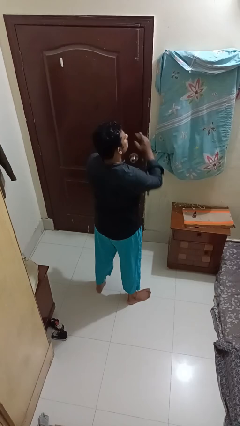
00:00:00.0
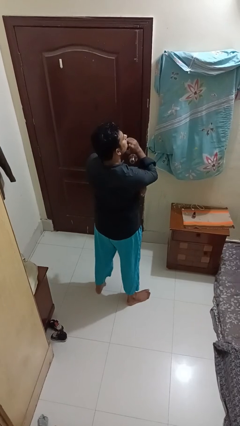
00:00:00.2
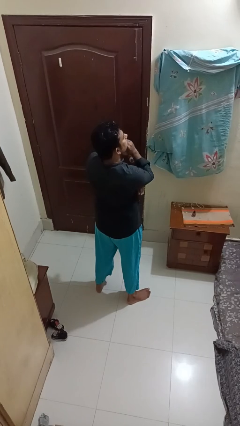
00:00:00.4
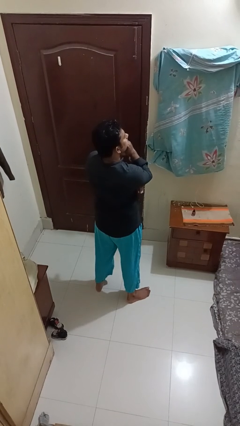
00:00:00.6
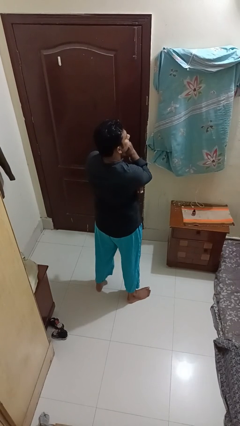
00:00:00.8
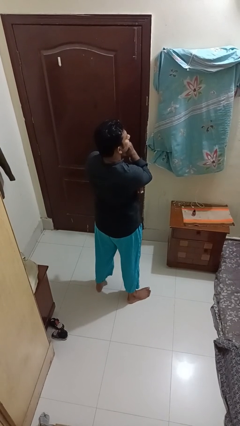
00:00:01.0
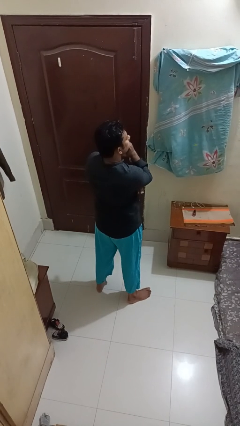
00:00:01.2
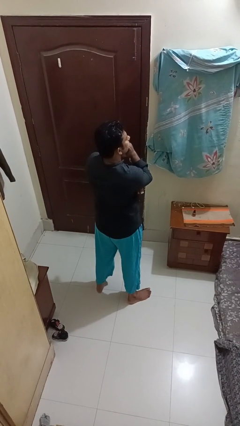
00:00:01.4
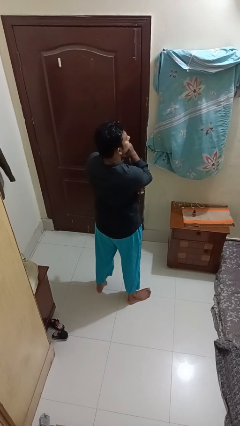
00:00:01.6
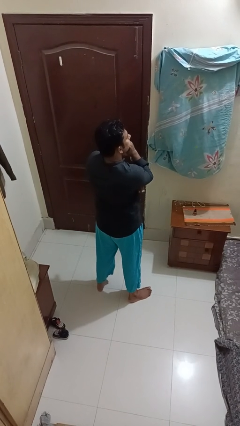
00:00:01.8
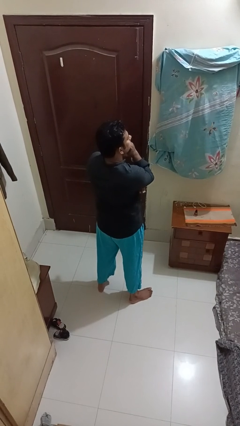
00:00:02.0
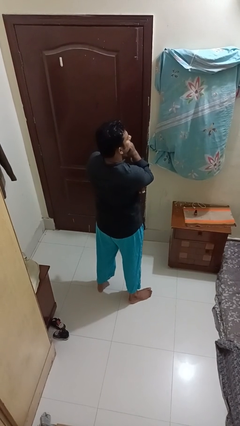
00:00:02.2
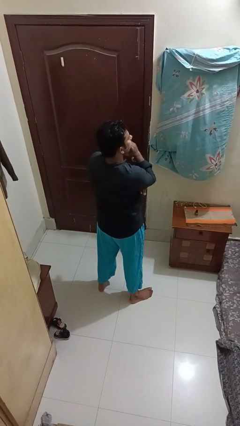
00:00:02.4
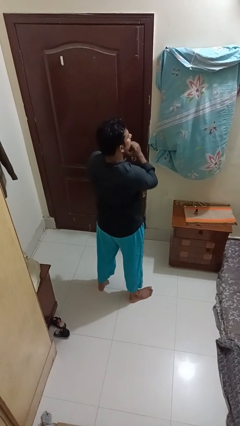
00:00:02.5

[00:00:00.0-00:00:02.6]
person strokes chin

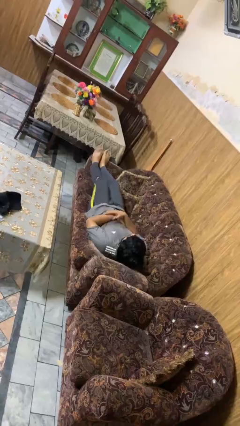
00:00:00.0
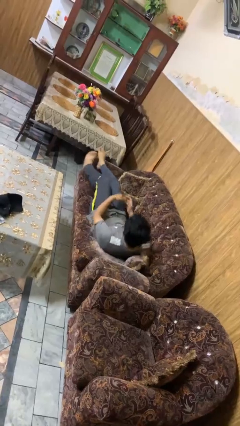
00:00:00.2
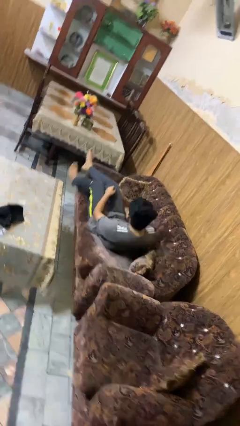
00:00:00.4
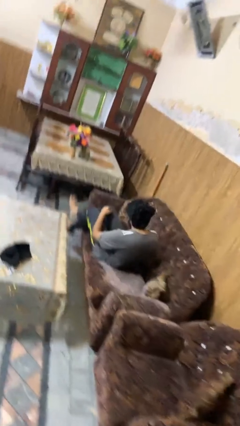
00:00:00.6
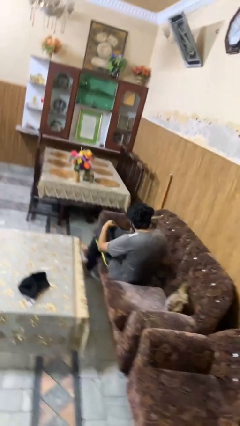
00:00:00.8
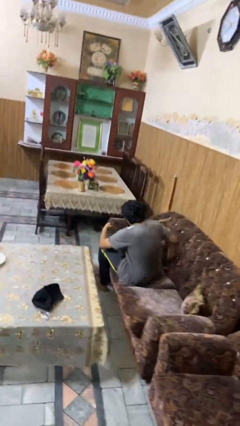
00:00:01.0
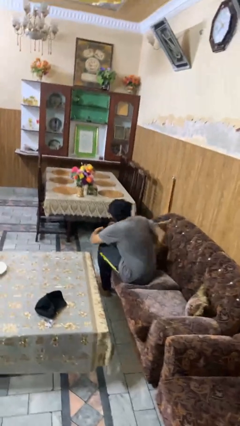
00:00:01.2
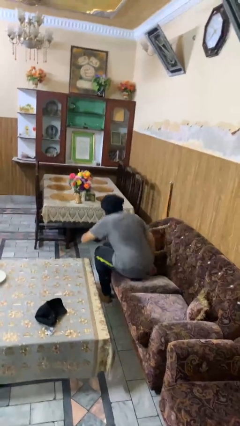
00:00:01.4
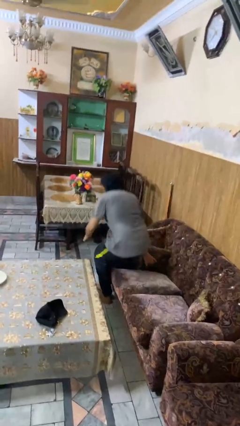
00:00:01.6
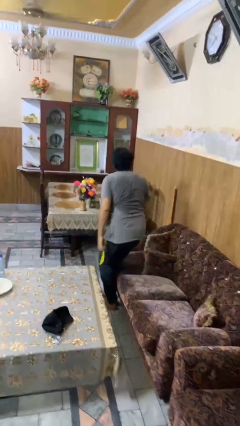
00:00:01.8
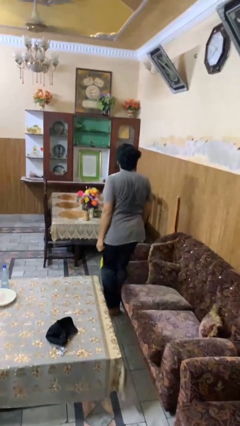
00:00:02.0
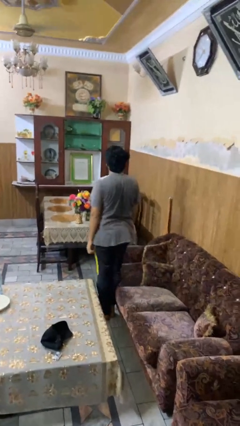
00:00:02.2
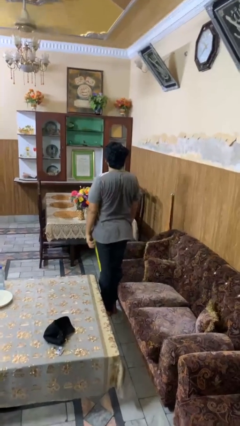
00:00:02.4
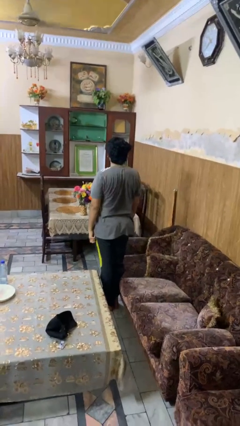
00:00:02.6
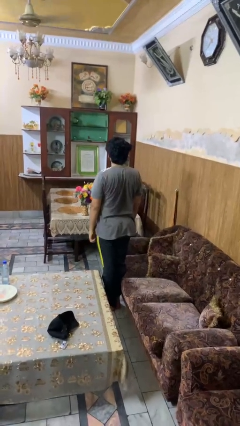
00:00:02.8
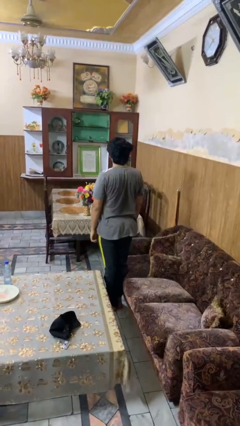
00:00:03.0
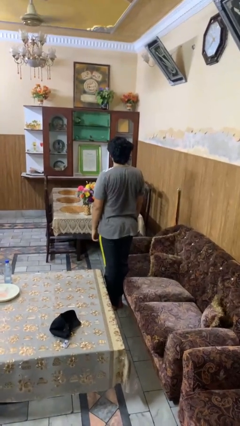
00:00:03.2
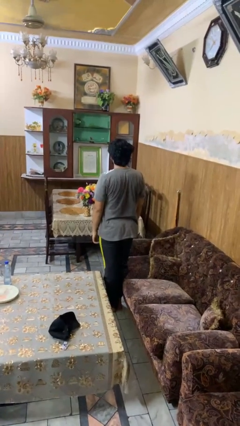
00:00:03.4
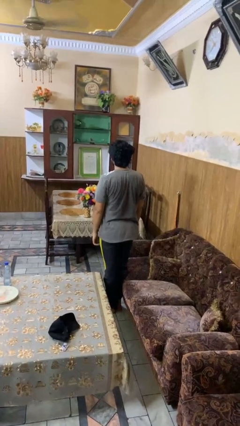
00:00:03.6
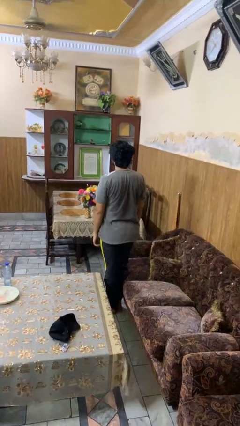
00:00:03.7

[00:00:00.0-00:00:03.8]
person stands up

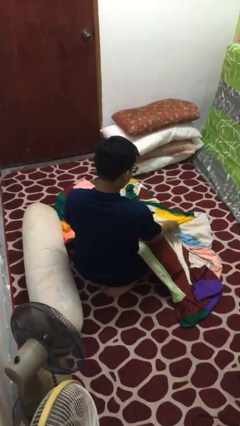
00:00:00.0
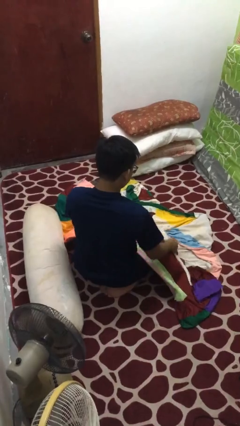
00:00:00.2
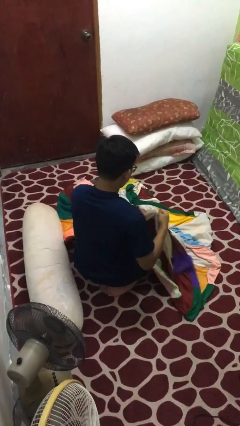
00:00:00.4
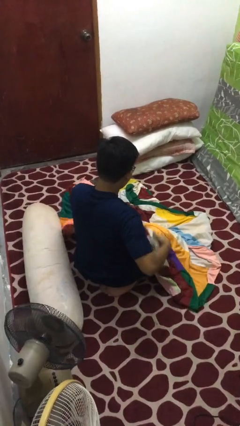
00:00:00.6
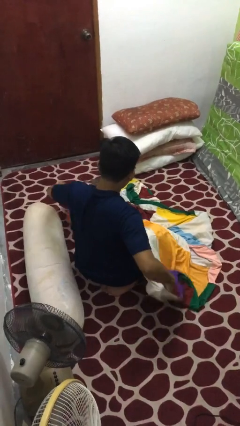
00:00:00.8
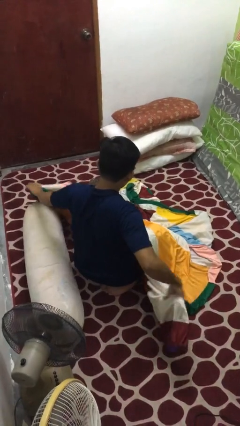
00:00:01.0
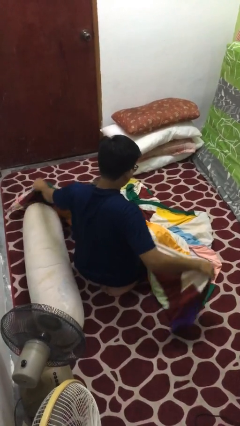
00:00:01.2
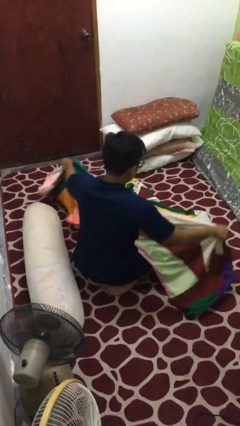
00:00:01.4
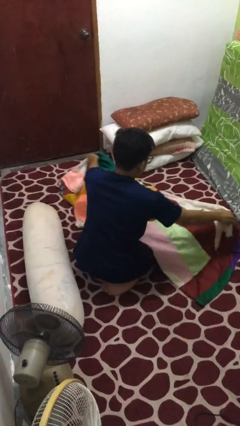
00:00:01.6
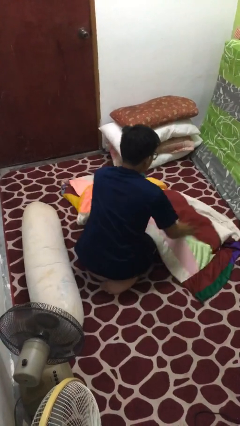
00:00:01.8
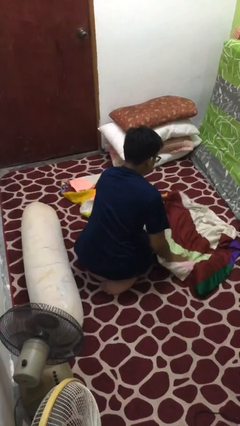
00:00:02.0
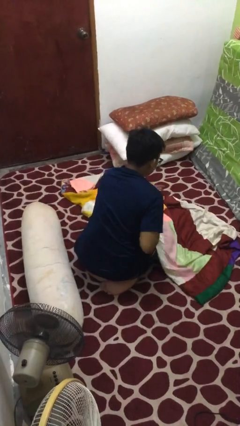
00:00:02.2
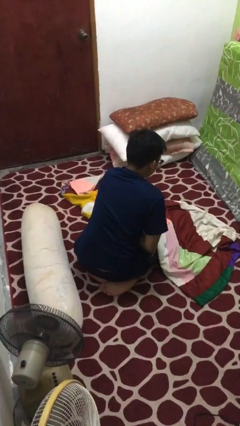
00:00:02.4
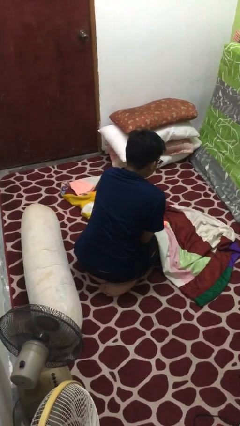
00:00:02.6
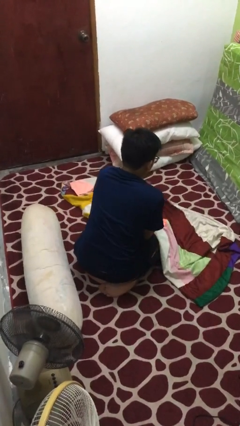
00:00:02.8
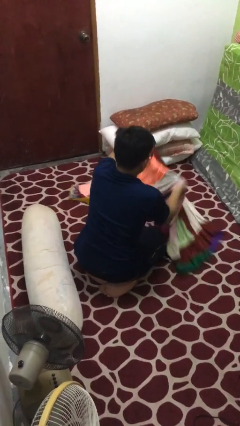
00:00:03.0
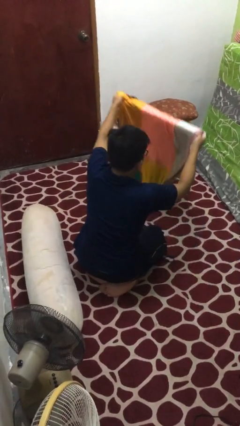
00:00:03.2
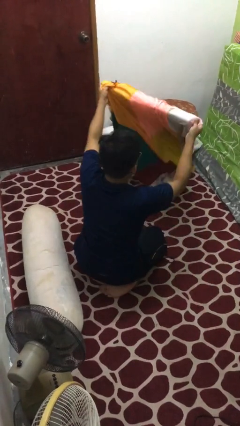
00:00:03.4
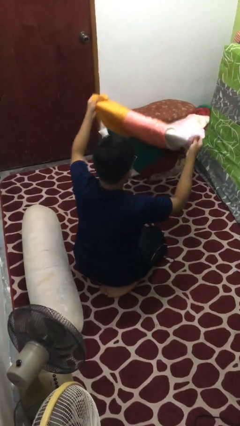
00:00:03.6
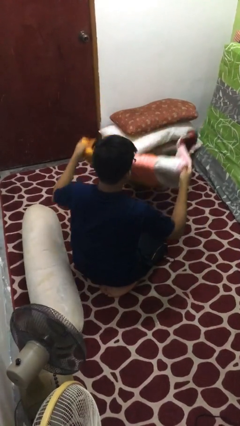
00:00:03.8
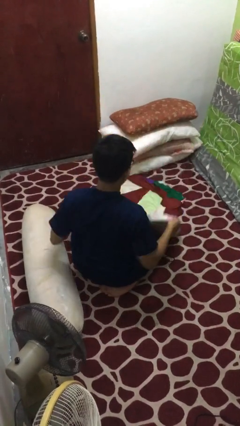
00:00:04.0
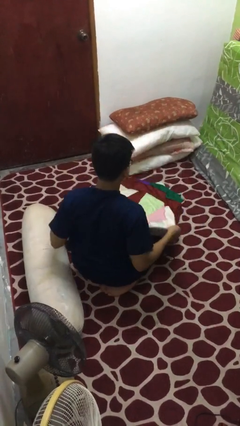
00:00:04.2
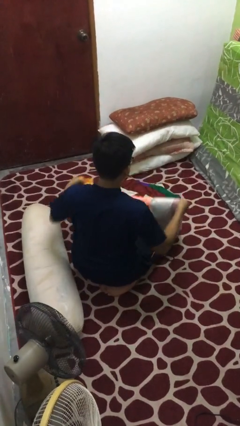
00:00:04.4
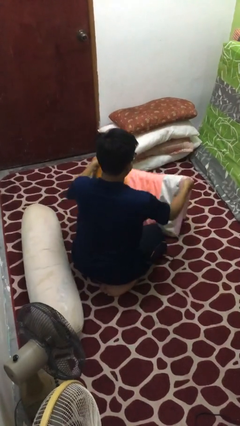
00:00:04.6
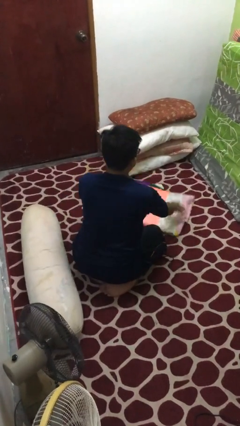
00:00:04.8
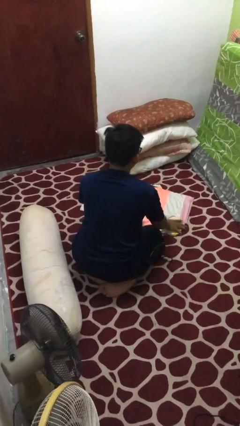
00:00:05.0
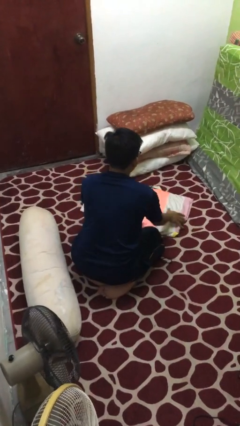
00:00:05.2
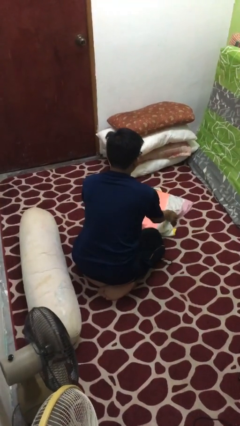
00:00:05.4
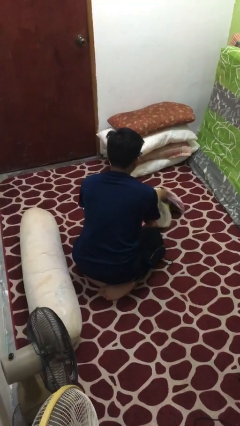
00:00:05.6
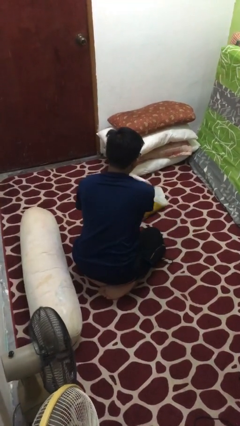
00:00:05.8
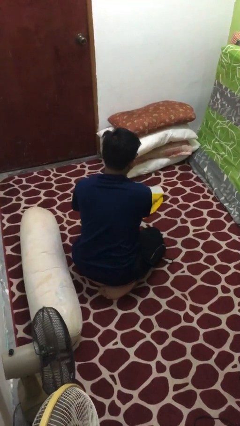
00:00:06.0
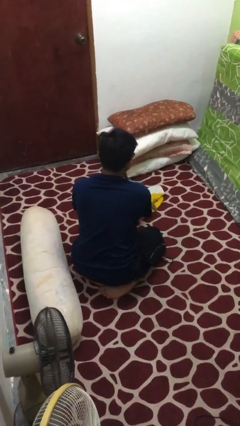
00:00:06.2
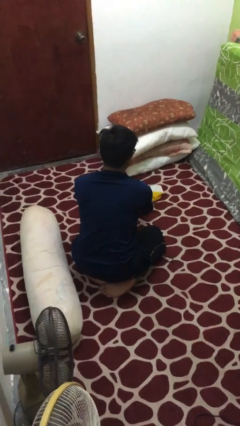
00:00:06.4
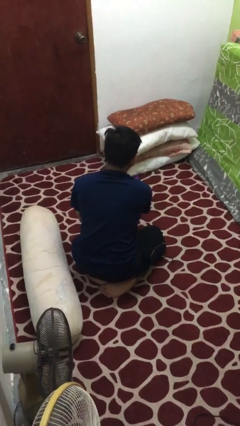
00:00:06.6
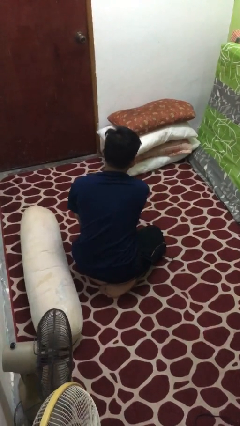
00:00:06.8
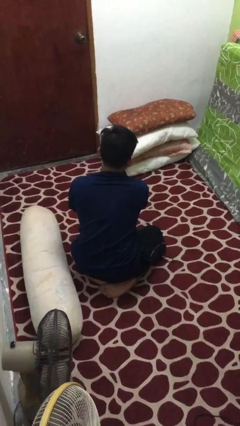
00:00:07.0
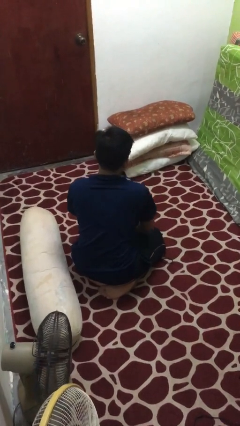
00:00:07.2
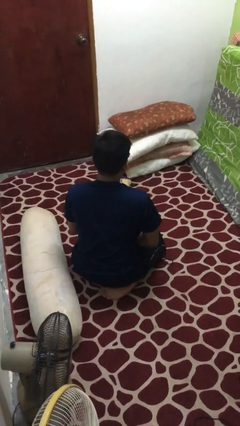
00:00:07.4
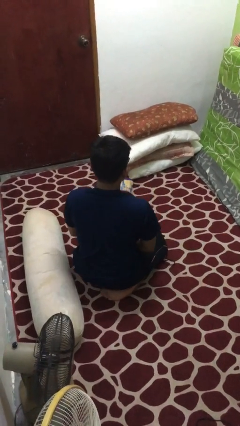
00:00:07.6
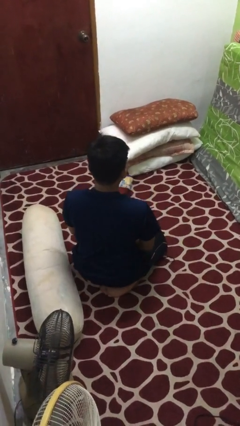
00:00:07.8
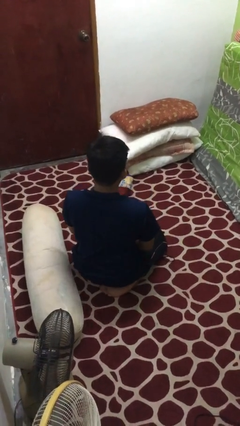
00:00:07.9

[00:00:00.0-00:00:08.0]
person folds blanket

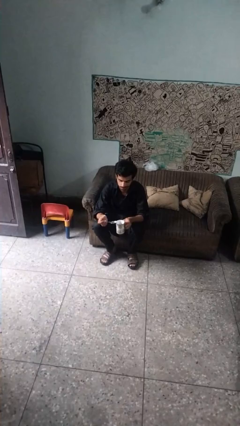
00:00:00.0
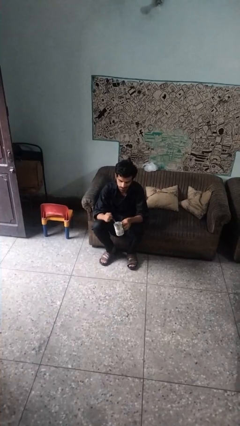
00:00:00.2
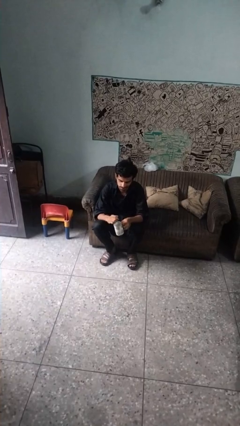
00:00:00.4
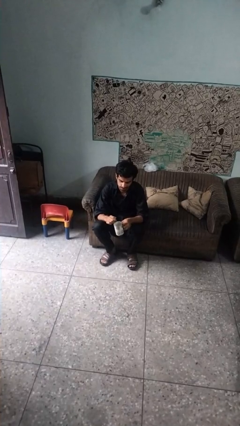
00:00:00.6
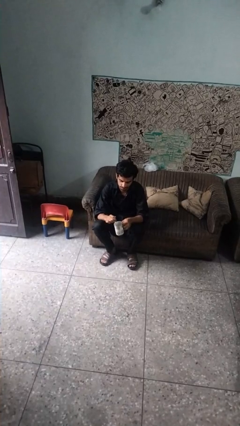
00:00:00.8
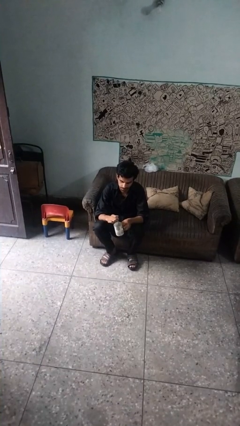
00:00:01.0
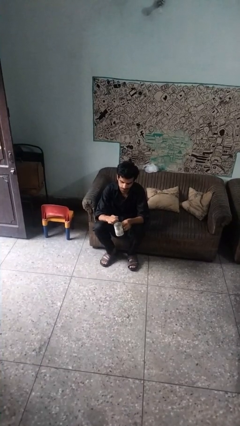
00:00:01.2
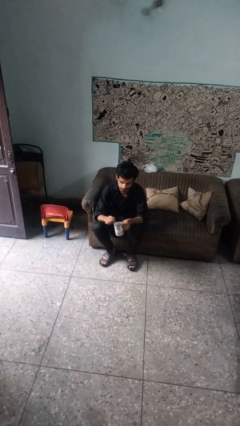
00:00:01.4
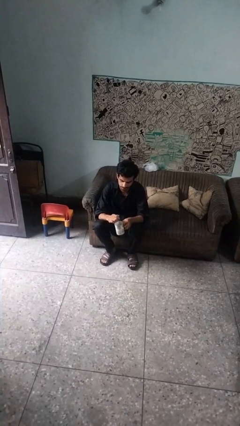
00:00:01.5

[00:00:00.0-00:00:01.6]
person stirs mug

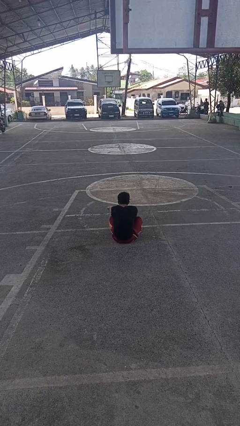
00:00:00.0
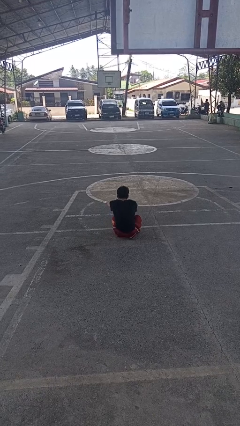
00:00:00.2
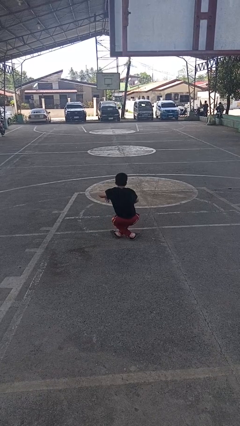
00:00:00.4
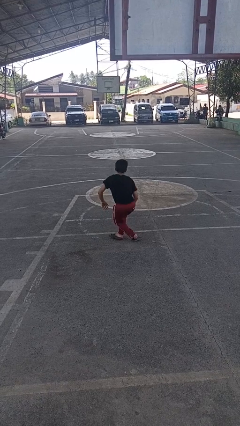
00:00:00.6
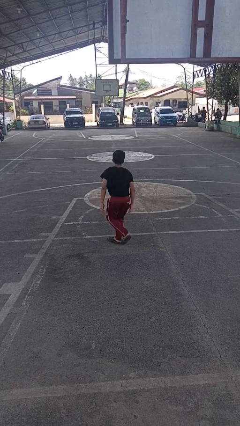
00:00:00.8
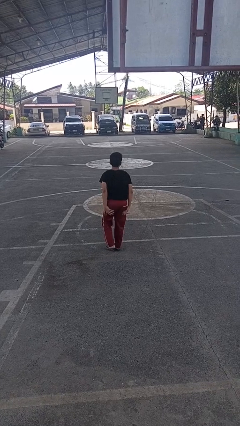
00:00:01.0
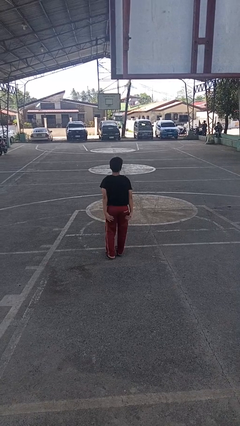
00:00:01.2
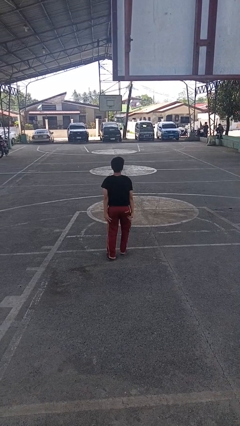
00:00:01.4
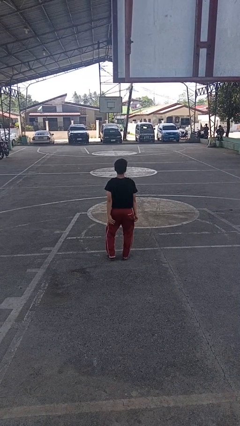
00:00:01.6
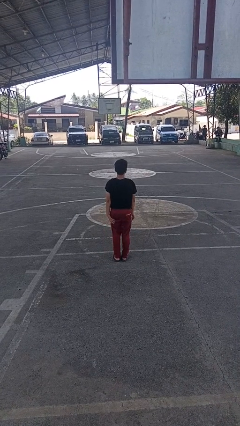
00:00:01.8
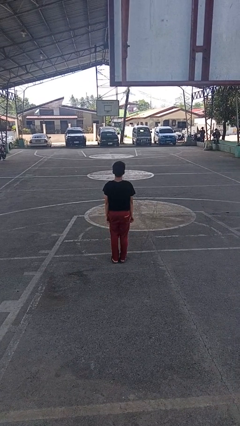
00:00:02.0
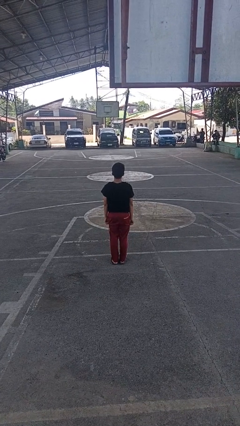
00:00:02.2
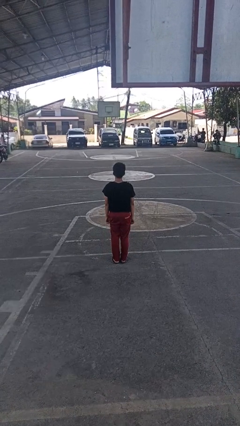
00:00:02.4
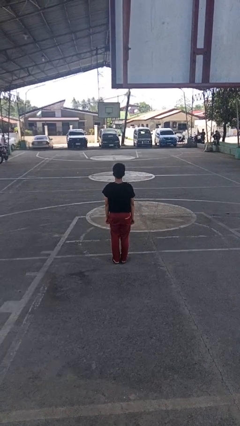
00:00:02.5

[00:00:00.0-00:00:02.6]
person stands up from floor
